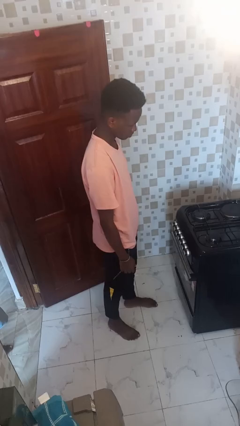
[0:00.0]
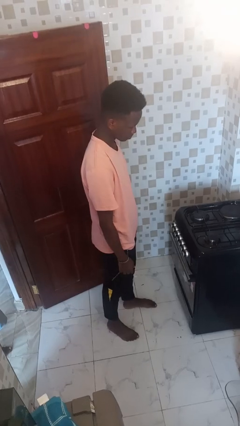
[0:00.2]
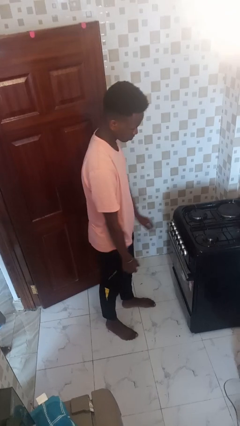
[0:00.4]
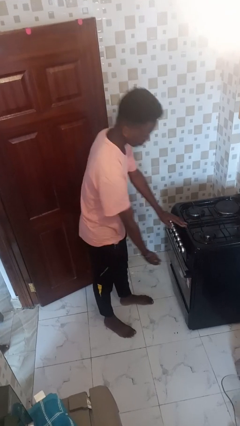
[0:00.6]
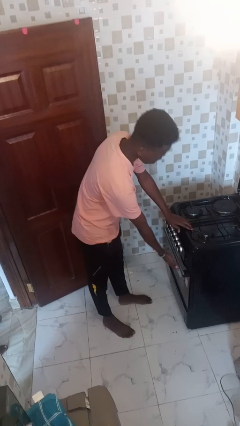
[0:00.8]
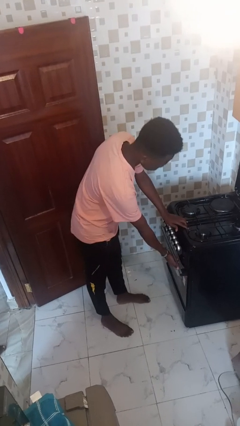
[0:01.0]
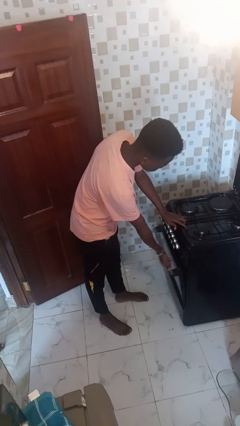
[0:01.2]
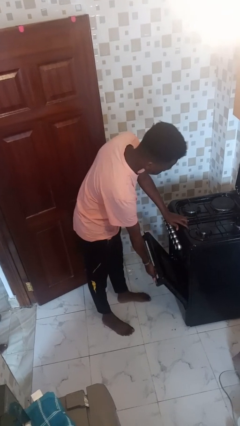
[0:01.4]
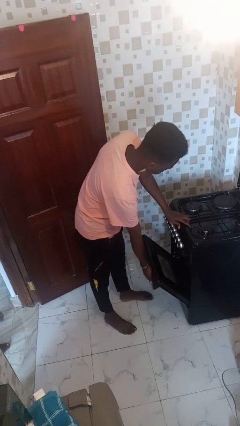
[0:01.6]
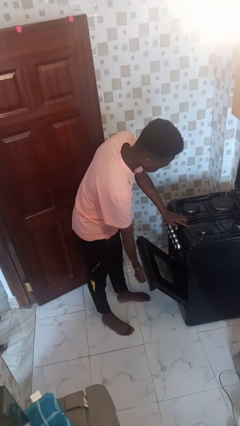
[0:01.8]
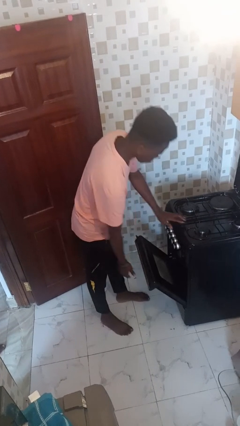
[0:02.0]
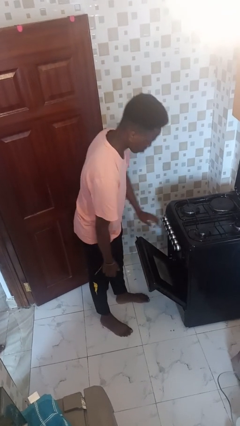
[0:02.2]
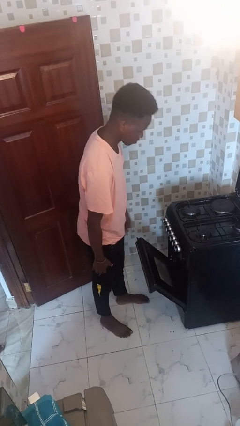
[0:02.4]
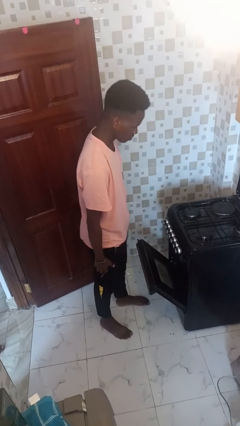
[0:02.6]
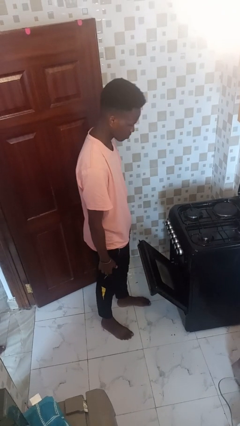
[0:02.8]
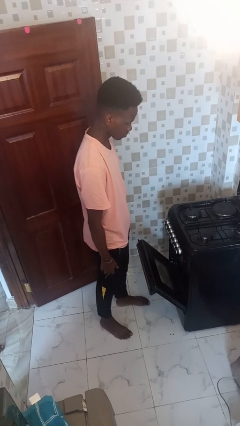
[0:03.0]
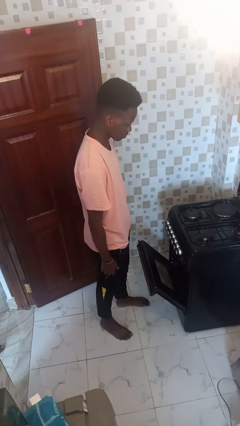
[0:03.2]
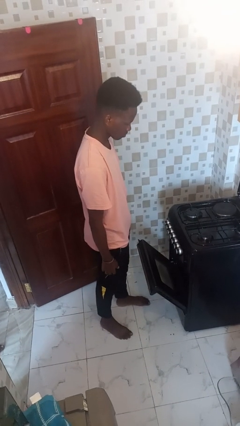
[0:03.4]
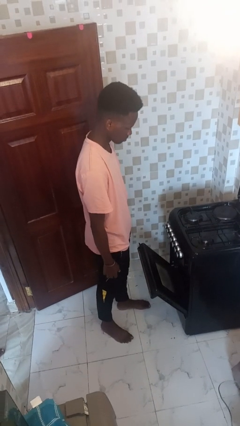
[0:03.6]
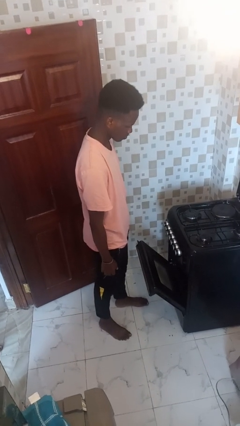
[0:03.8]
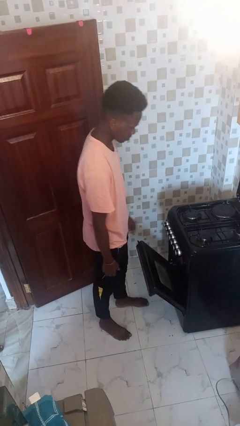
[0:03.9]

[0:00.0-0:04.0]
person opens oven door

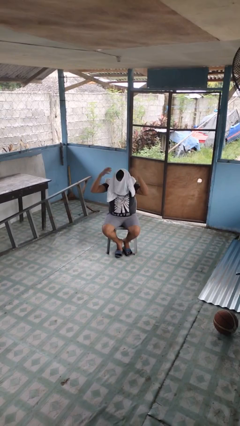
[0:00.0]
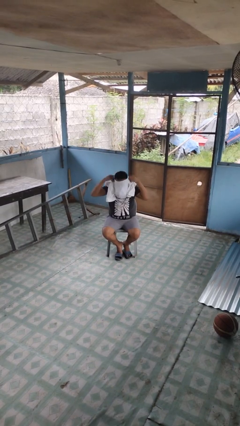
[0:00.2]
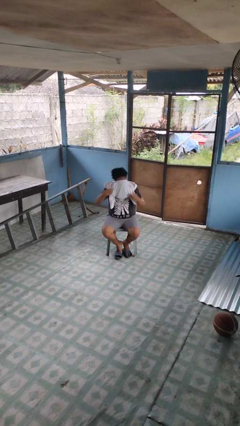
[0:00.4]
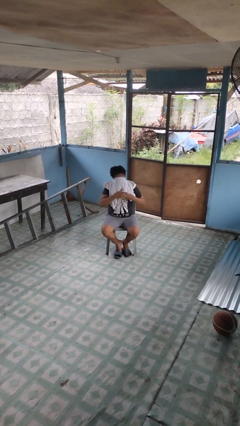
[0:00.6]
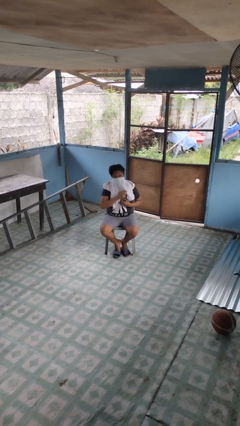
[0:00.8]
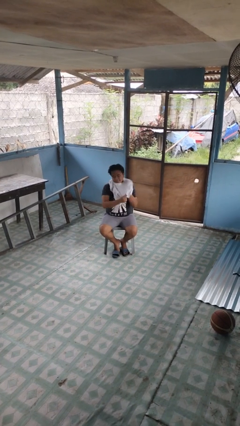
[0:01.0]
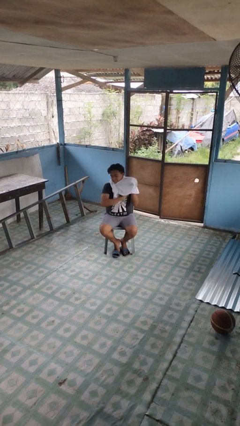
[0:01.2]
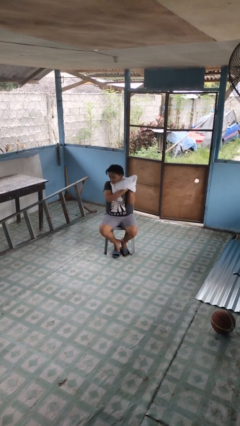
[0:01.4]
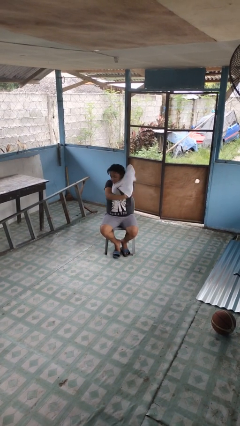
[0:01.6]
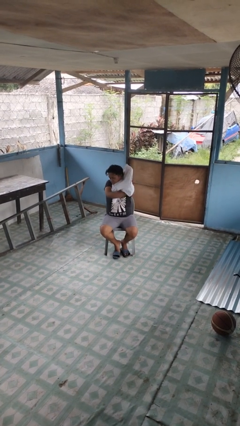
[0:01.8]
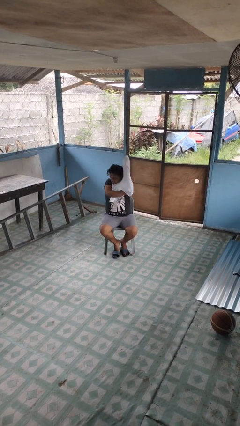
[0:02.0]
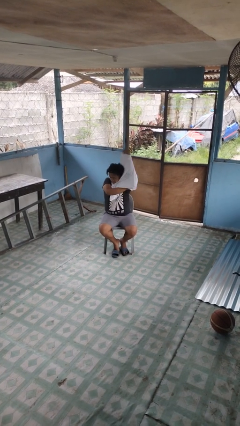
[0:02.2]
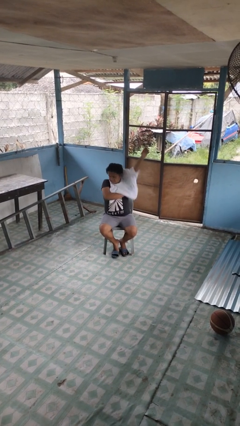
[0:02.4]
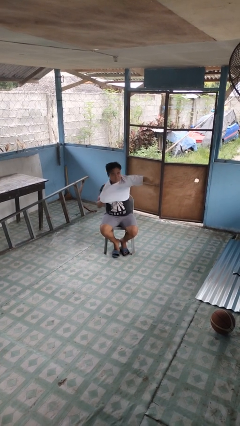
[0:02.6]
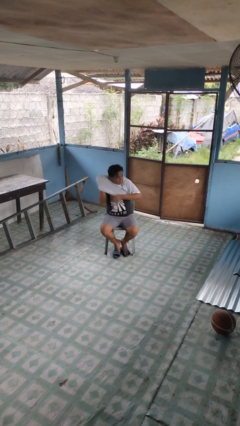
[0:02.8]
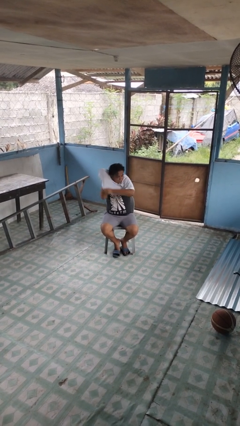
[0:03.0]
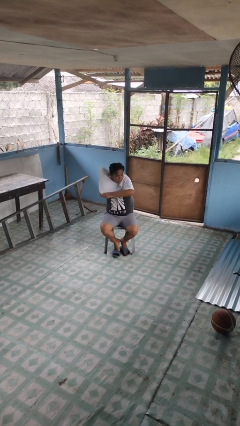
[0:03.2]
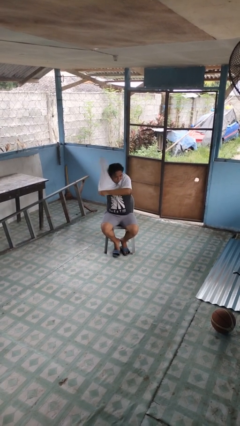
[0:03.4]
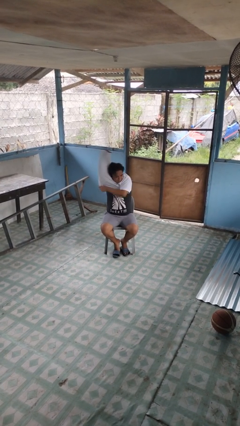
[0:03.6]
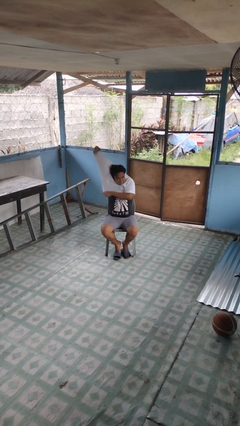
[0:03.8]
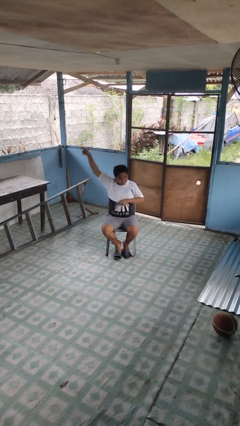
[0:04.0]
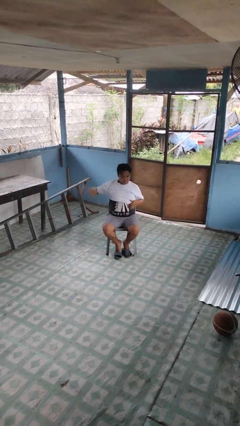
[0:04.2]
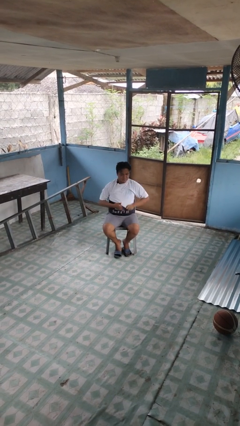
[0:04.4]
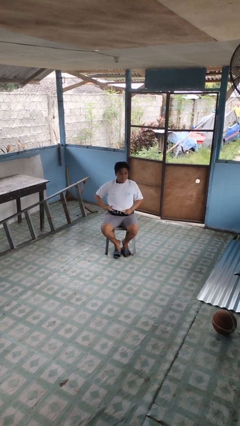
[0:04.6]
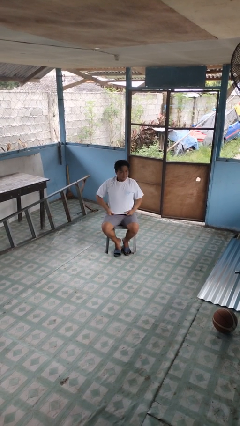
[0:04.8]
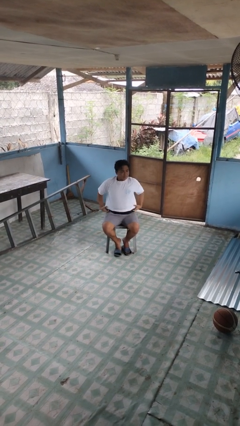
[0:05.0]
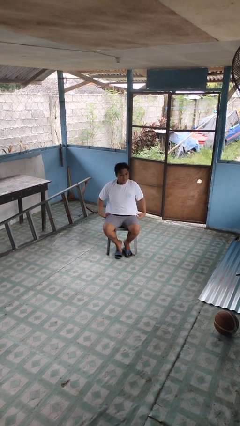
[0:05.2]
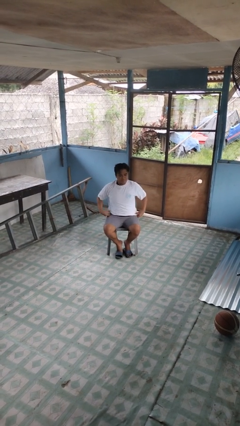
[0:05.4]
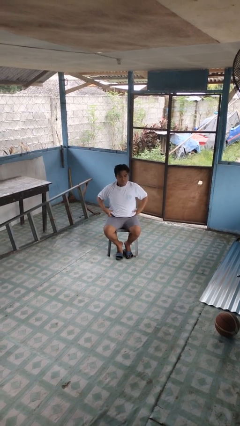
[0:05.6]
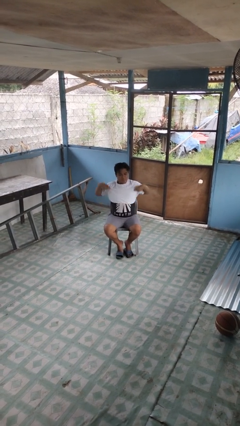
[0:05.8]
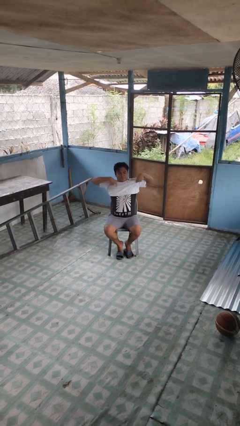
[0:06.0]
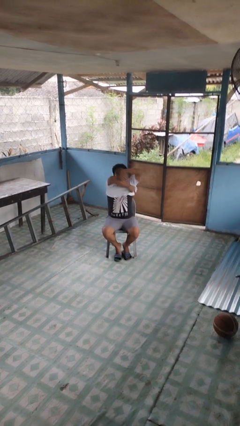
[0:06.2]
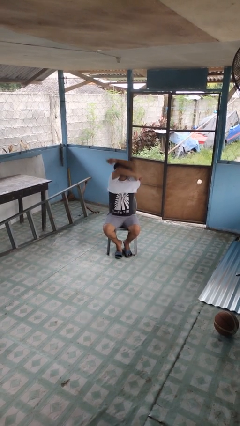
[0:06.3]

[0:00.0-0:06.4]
person puts on shirt

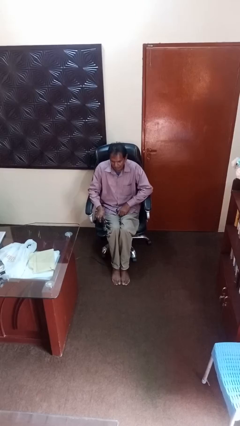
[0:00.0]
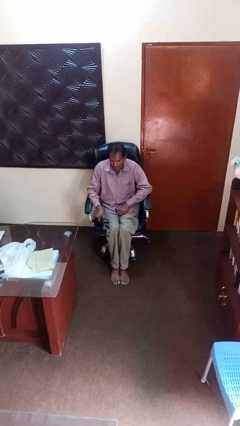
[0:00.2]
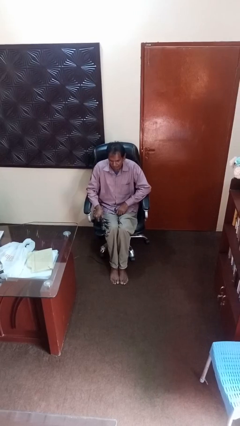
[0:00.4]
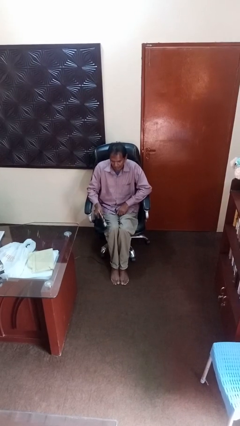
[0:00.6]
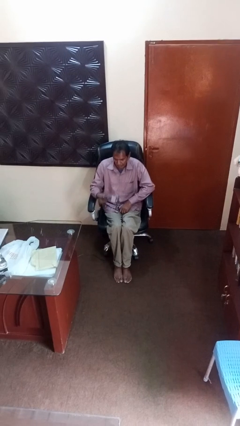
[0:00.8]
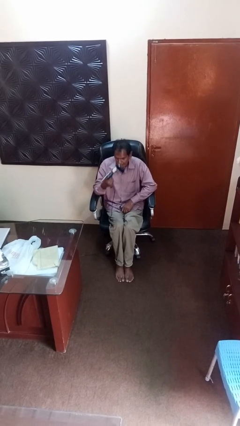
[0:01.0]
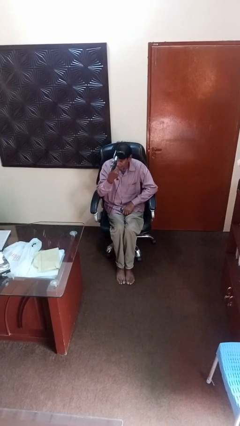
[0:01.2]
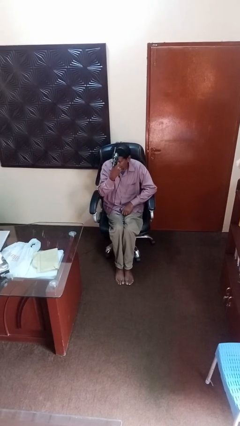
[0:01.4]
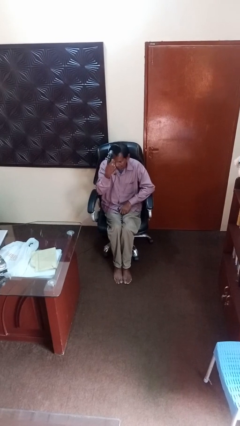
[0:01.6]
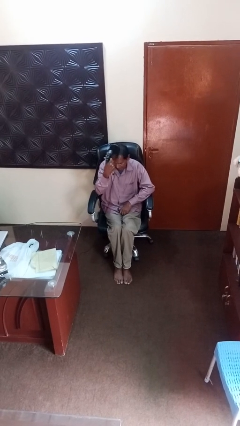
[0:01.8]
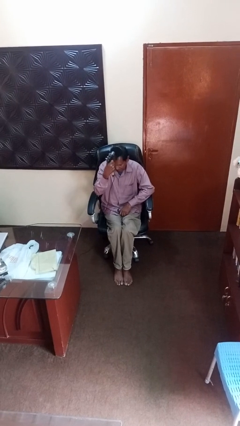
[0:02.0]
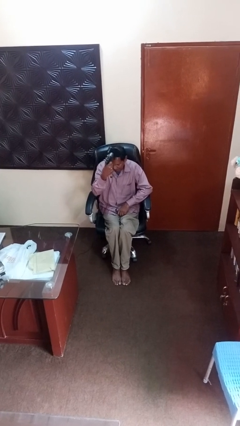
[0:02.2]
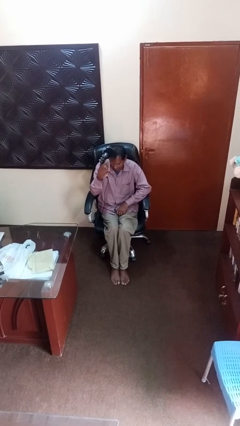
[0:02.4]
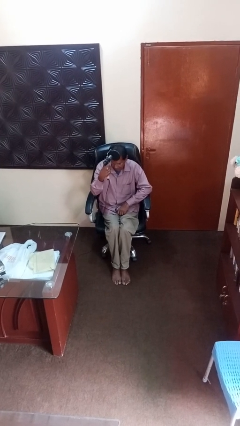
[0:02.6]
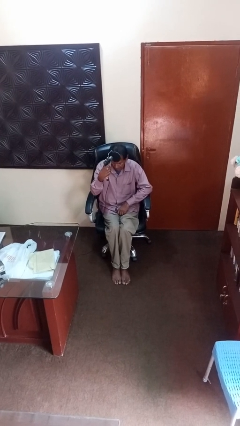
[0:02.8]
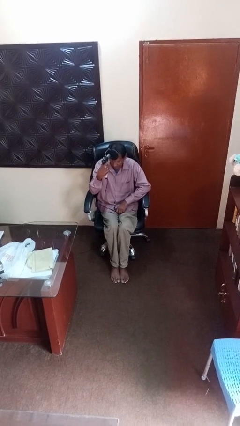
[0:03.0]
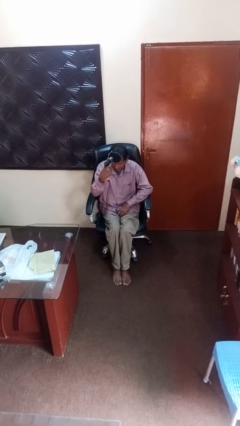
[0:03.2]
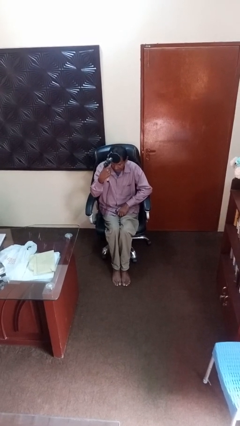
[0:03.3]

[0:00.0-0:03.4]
person dries hair with hairdryer

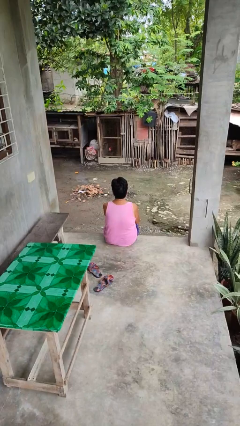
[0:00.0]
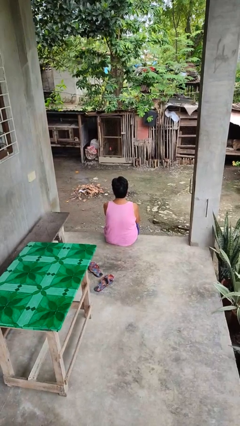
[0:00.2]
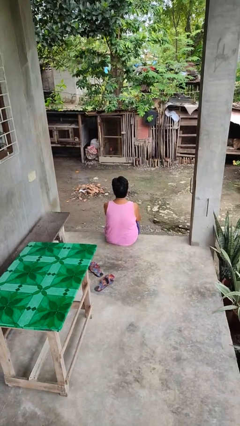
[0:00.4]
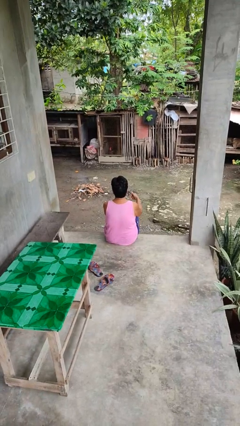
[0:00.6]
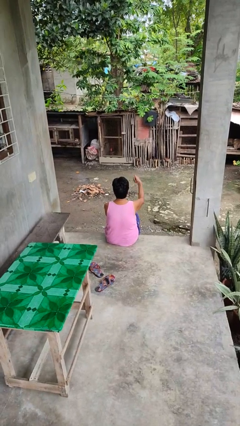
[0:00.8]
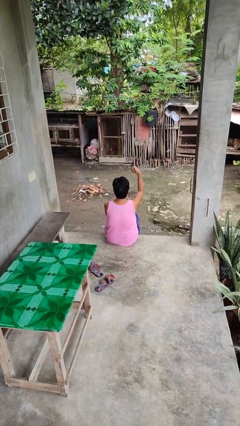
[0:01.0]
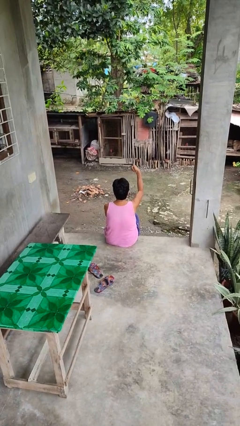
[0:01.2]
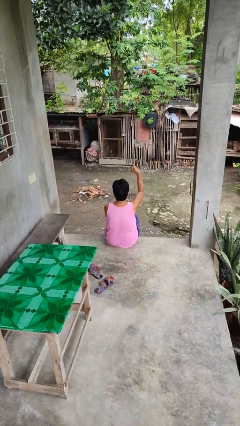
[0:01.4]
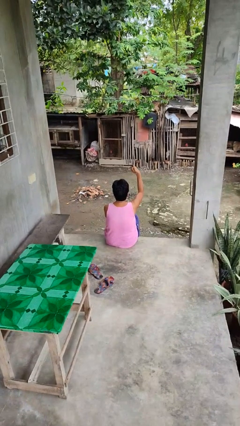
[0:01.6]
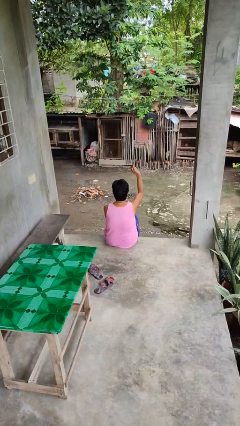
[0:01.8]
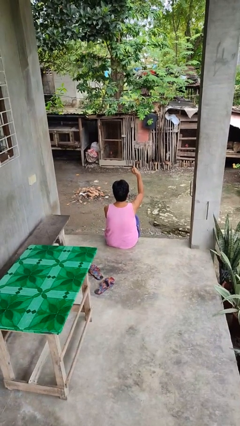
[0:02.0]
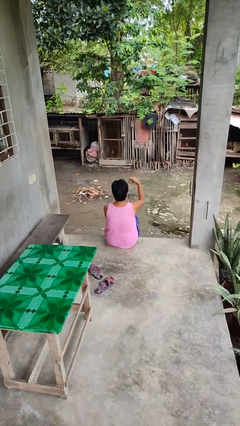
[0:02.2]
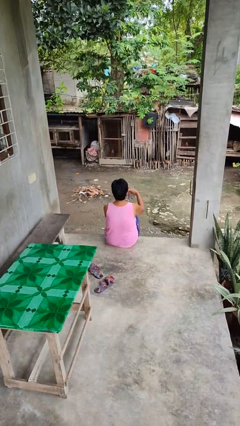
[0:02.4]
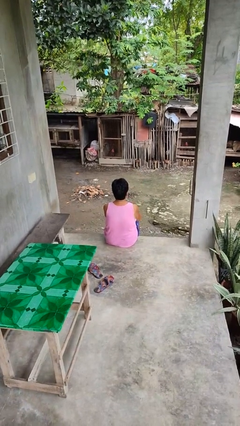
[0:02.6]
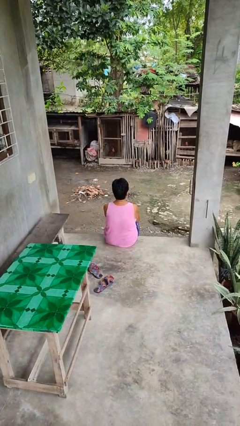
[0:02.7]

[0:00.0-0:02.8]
person gestures thumbs up

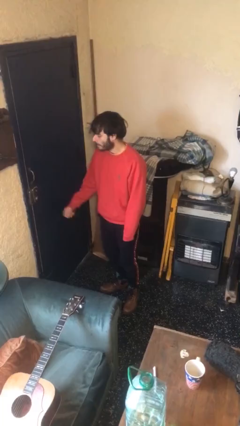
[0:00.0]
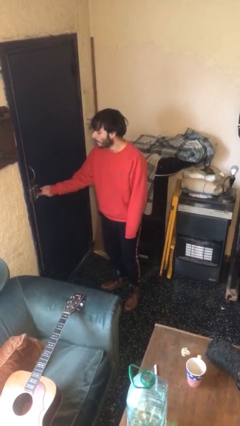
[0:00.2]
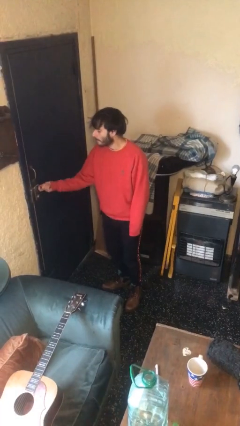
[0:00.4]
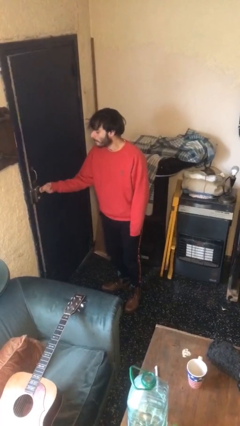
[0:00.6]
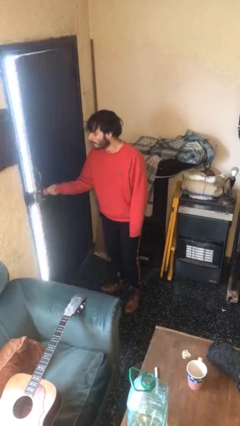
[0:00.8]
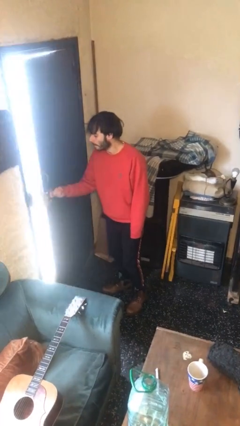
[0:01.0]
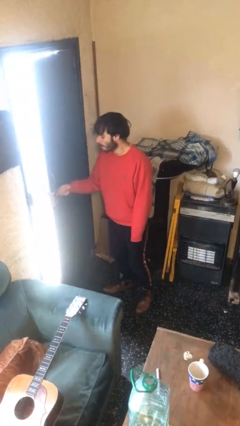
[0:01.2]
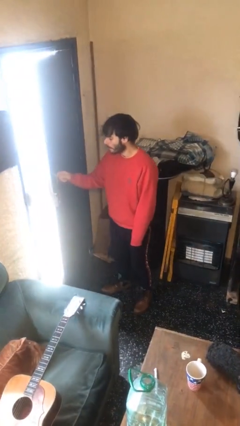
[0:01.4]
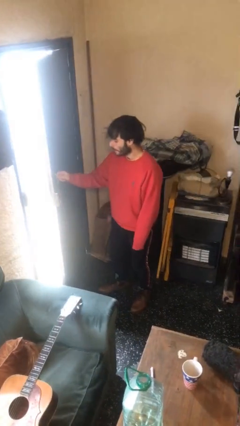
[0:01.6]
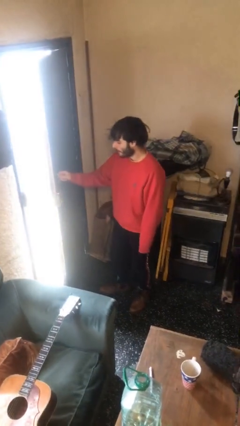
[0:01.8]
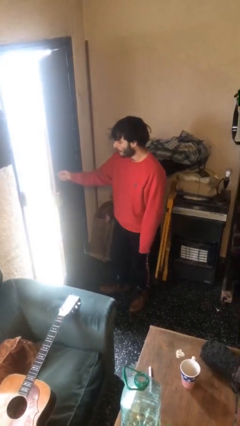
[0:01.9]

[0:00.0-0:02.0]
person opens facility door
